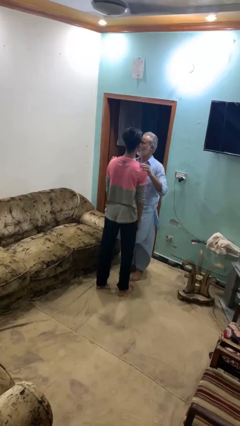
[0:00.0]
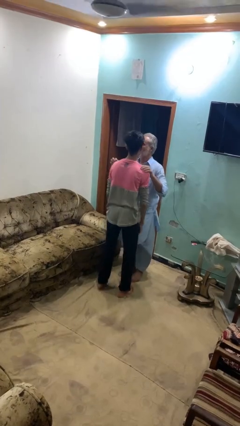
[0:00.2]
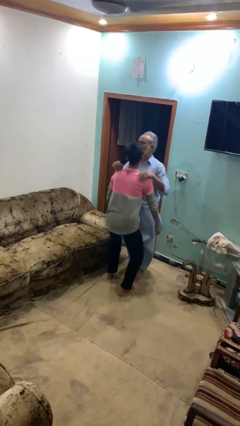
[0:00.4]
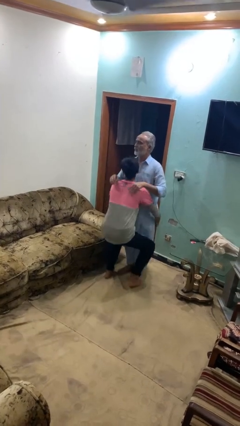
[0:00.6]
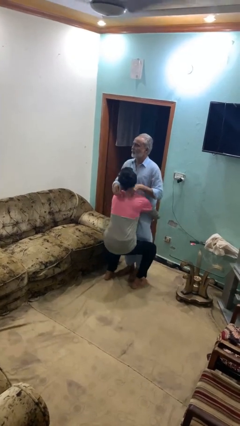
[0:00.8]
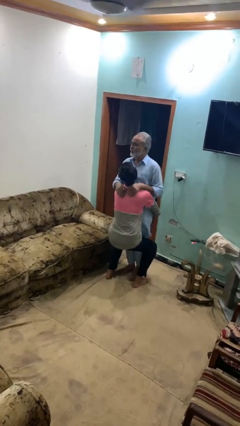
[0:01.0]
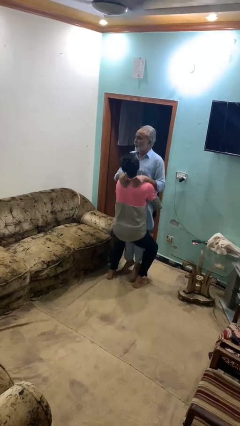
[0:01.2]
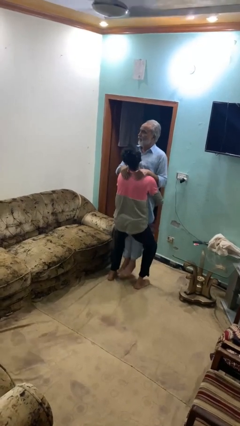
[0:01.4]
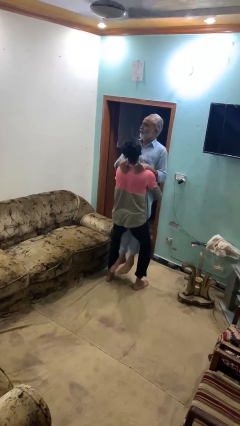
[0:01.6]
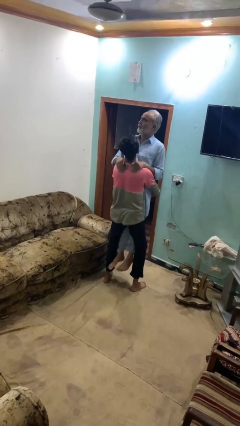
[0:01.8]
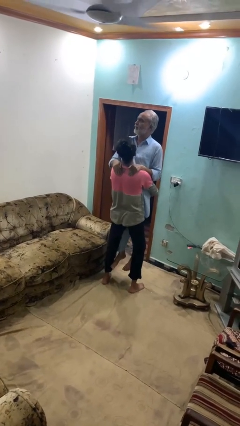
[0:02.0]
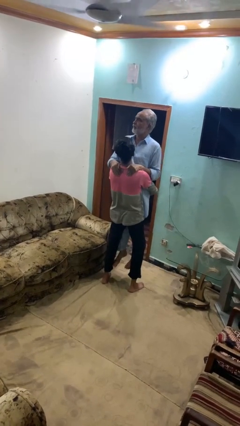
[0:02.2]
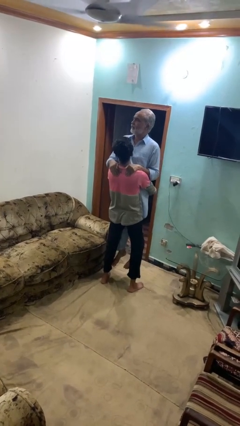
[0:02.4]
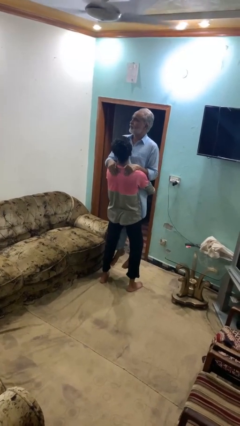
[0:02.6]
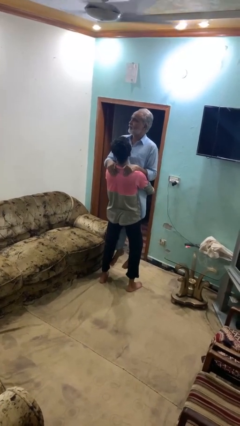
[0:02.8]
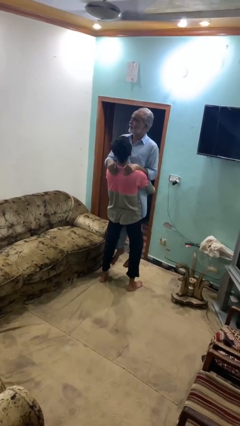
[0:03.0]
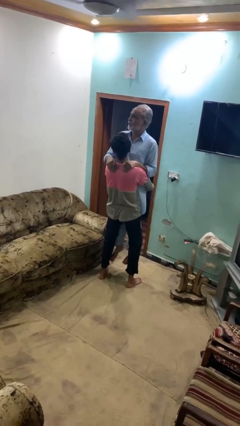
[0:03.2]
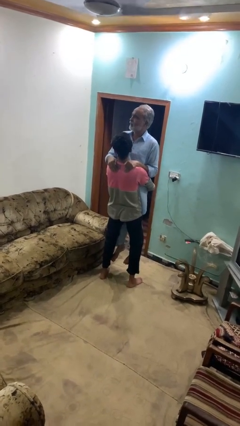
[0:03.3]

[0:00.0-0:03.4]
person picks up person

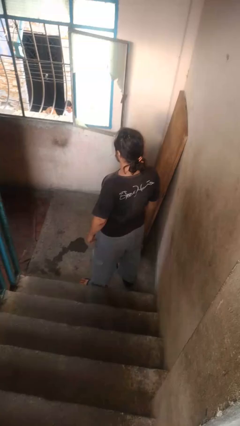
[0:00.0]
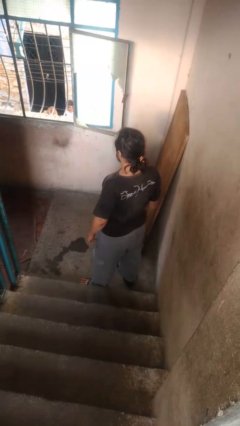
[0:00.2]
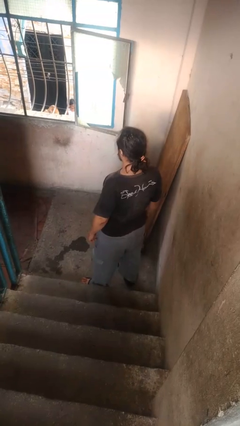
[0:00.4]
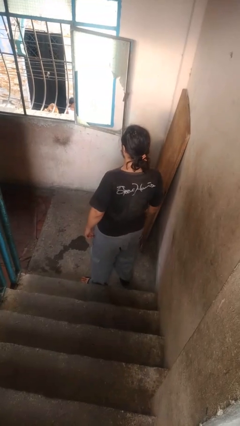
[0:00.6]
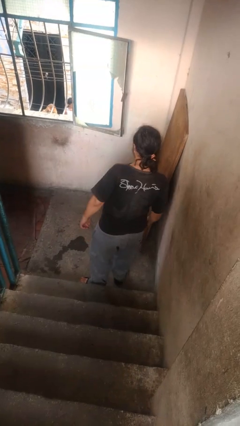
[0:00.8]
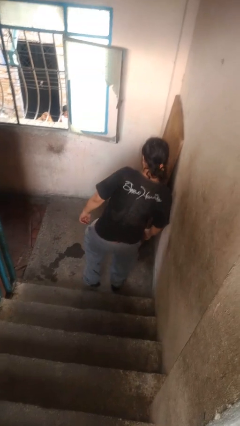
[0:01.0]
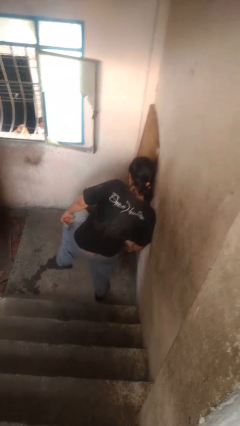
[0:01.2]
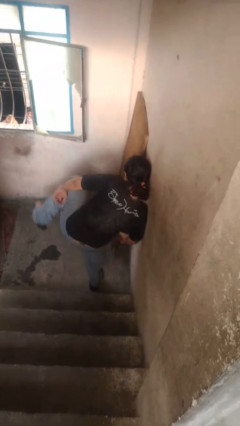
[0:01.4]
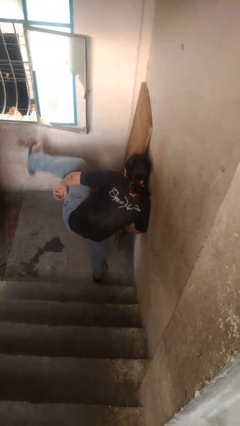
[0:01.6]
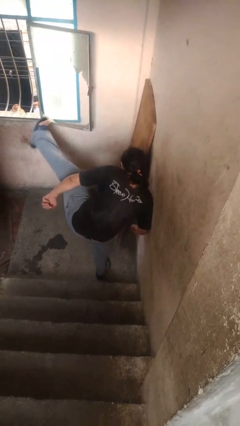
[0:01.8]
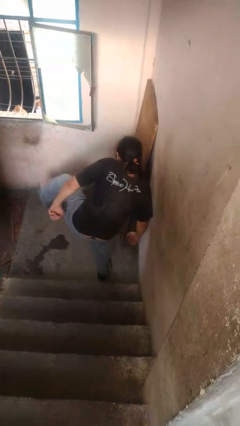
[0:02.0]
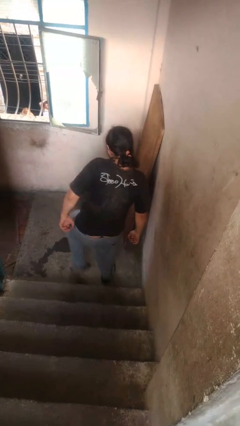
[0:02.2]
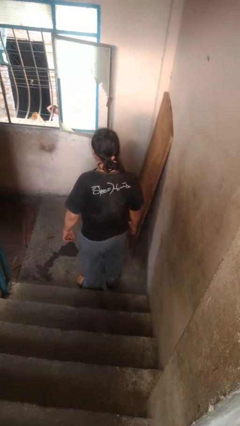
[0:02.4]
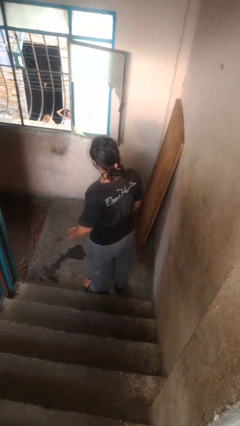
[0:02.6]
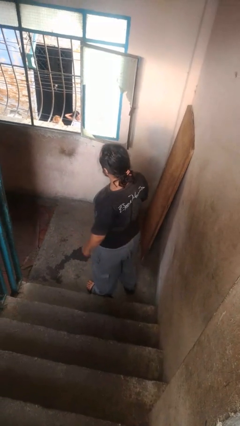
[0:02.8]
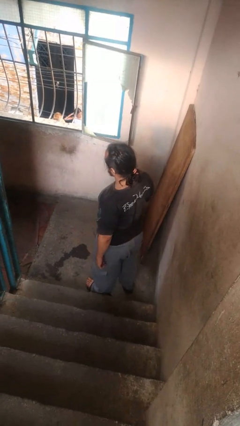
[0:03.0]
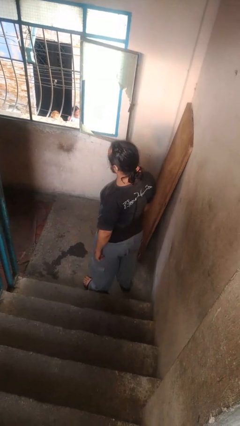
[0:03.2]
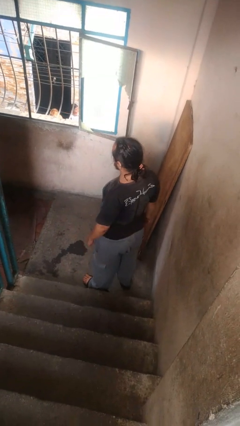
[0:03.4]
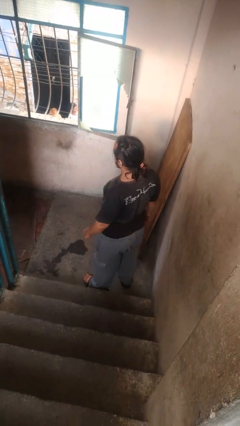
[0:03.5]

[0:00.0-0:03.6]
person karate kicks

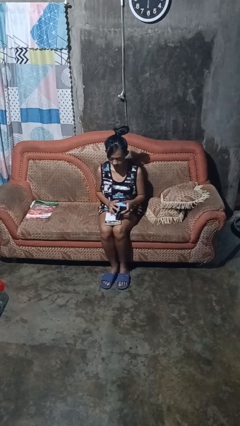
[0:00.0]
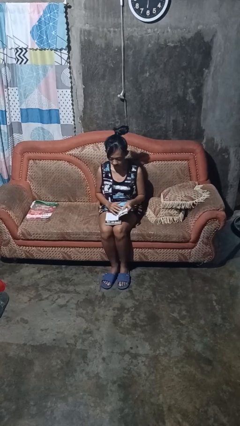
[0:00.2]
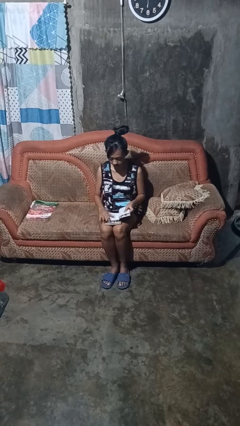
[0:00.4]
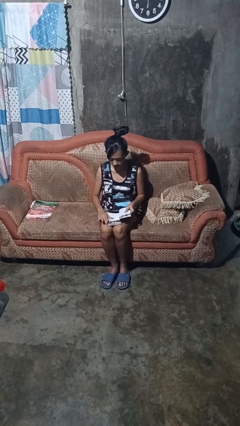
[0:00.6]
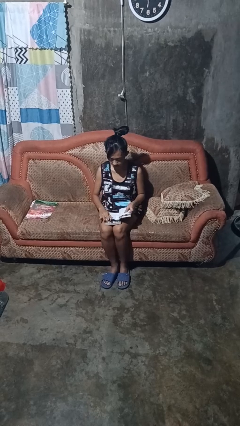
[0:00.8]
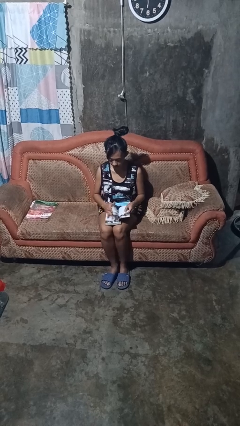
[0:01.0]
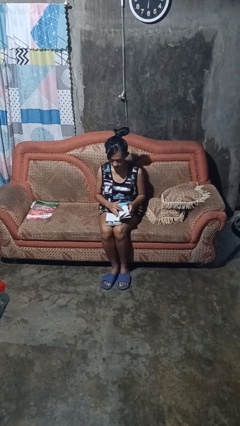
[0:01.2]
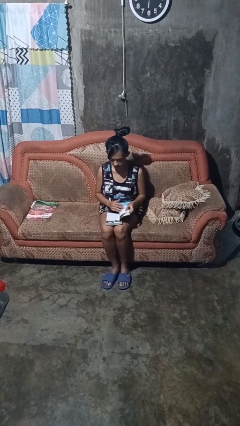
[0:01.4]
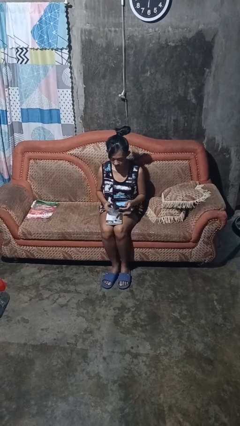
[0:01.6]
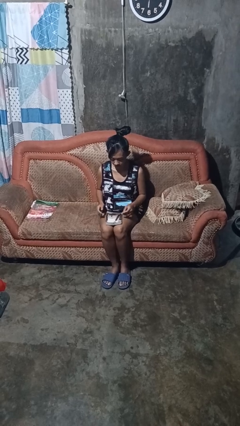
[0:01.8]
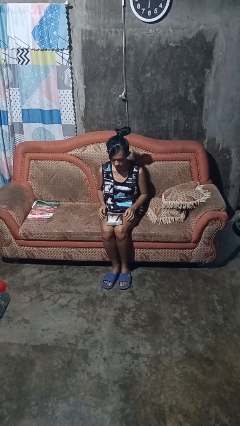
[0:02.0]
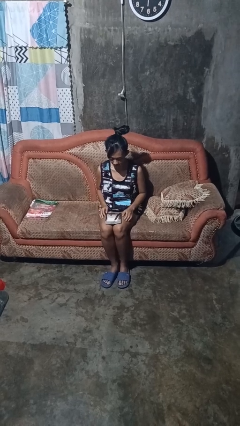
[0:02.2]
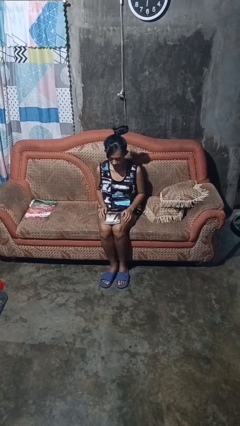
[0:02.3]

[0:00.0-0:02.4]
person reads book

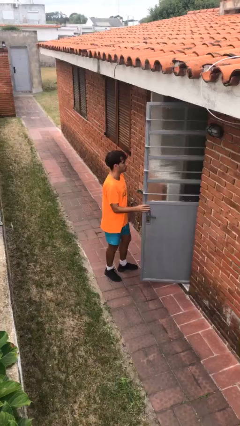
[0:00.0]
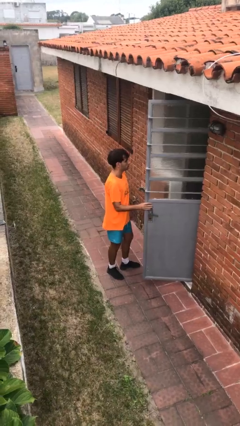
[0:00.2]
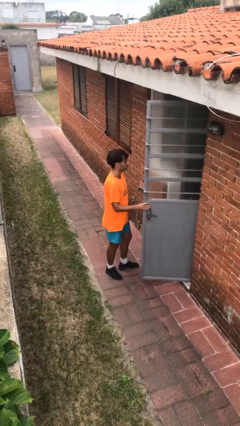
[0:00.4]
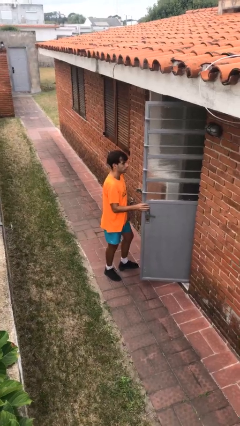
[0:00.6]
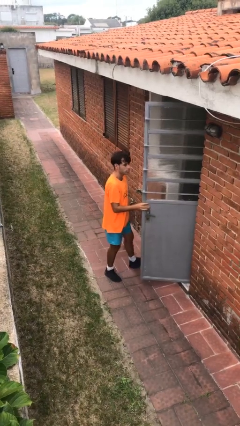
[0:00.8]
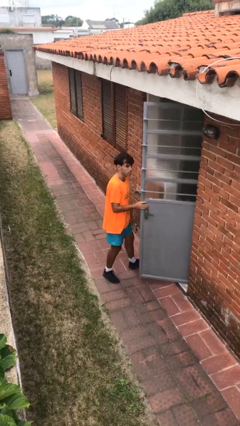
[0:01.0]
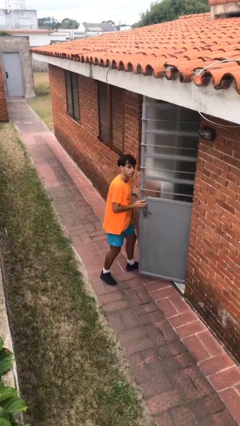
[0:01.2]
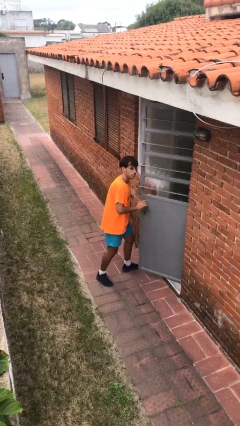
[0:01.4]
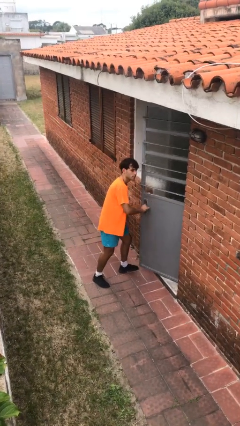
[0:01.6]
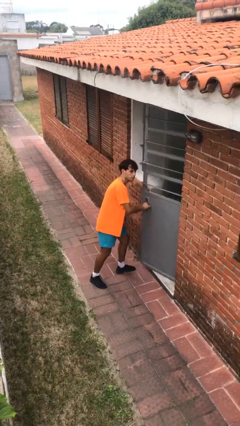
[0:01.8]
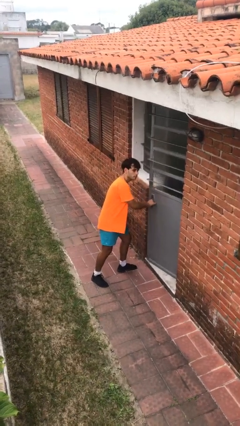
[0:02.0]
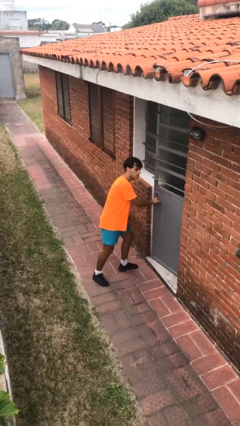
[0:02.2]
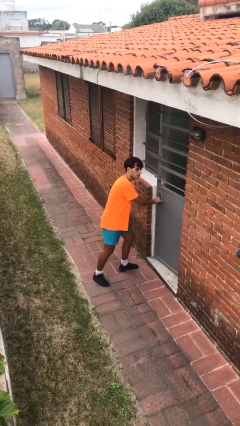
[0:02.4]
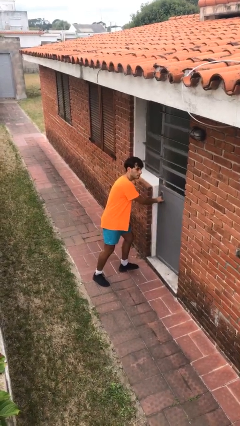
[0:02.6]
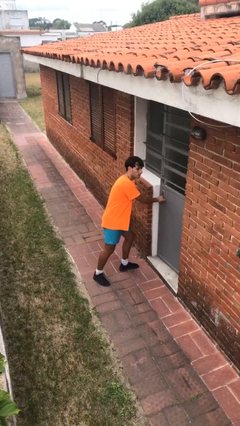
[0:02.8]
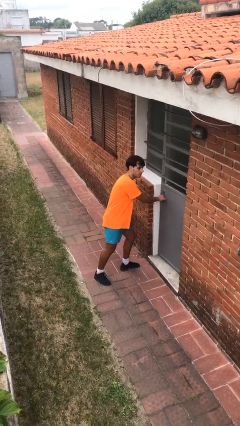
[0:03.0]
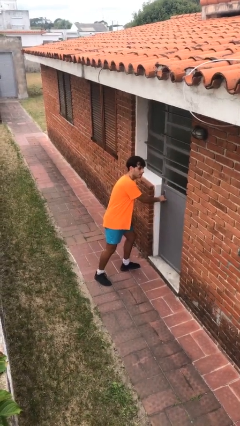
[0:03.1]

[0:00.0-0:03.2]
person closes facility door

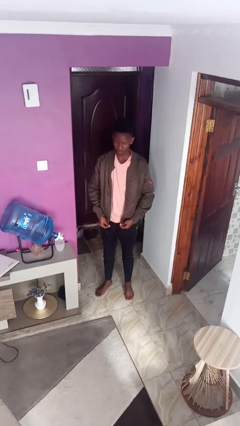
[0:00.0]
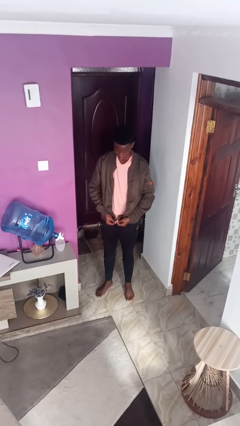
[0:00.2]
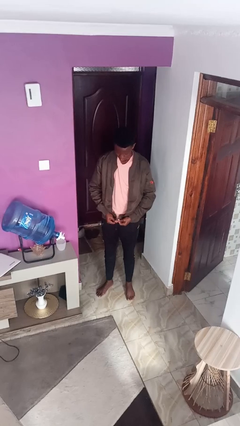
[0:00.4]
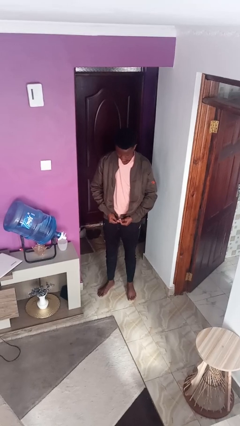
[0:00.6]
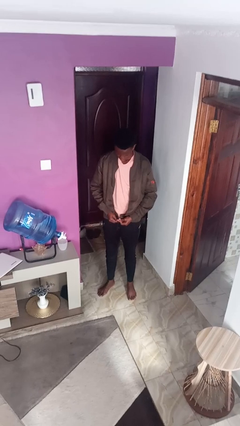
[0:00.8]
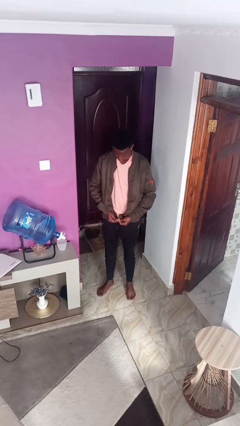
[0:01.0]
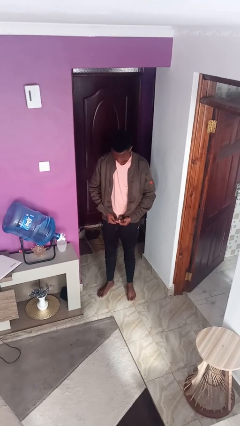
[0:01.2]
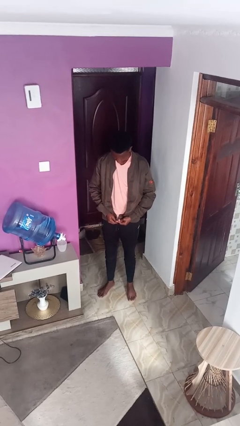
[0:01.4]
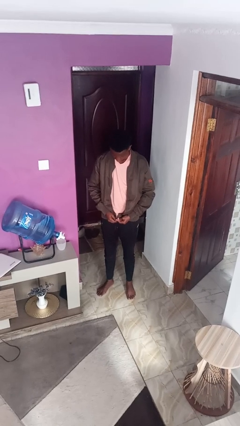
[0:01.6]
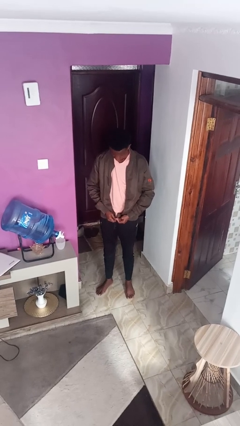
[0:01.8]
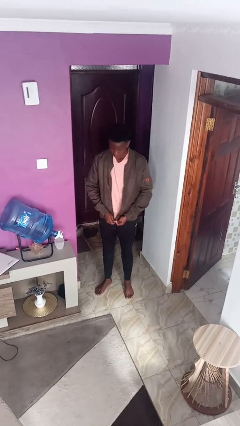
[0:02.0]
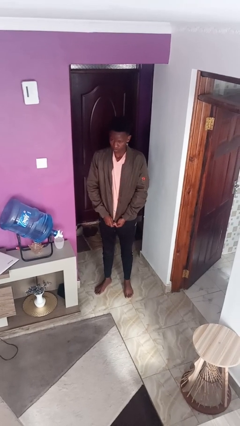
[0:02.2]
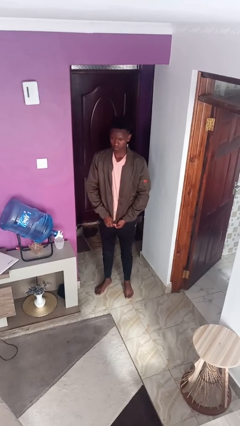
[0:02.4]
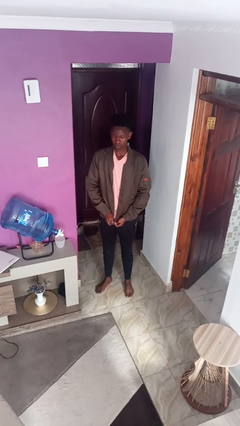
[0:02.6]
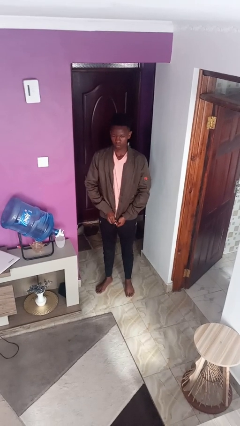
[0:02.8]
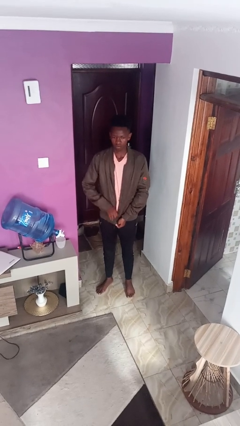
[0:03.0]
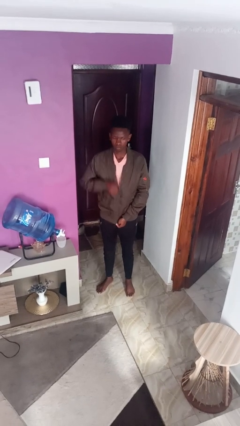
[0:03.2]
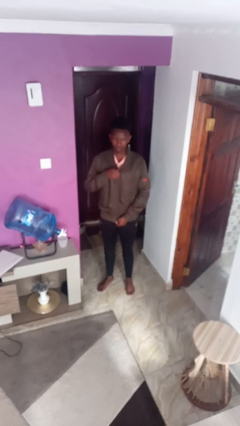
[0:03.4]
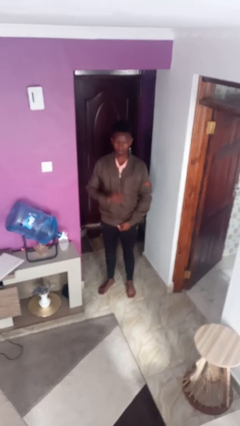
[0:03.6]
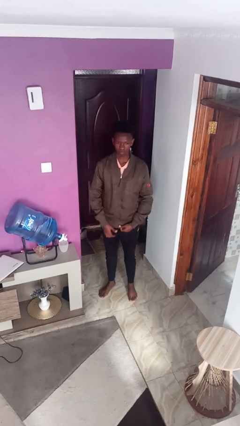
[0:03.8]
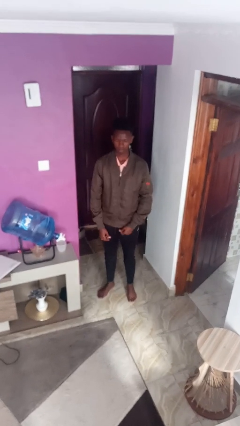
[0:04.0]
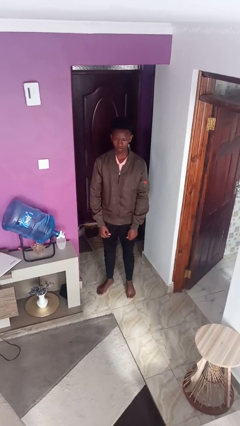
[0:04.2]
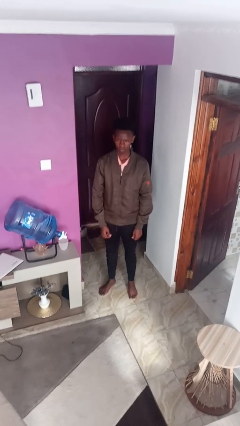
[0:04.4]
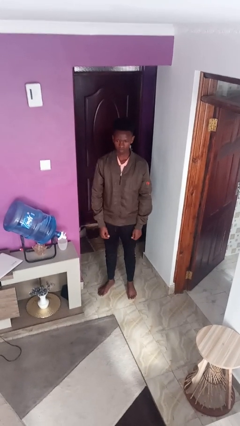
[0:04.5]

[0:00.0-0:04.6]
person zips up jacket
